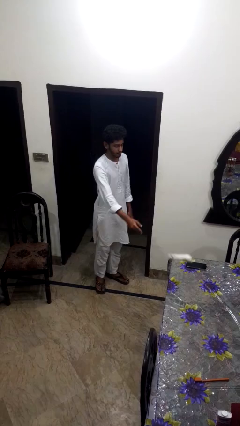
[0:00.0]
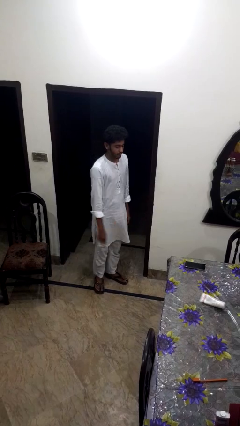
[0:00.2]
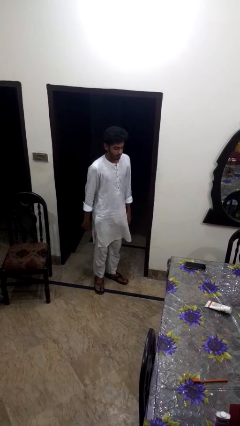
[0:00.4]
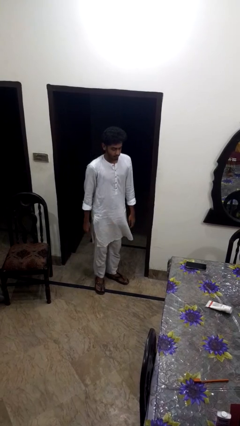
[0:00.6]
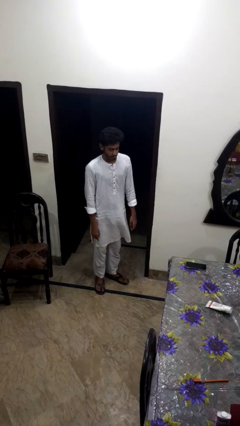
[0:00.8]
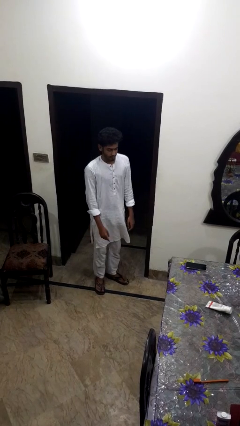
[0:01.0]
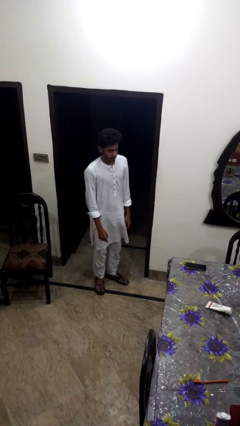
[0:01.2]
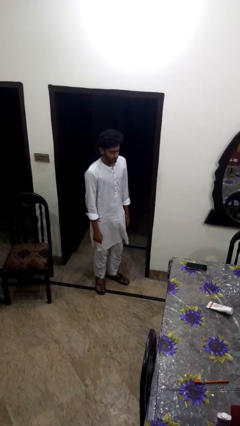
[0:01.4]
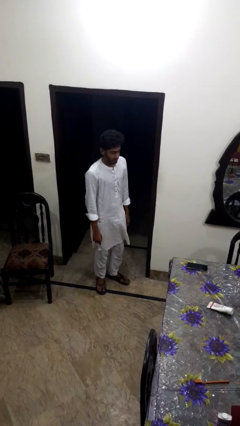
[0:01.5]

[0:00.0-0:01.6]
person throws object on table

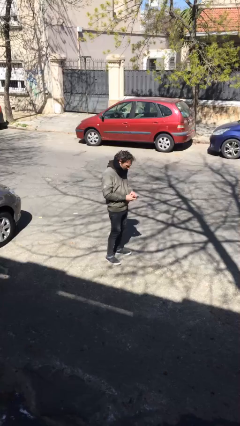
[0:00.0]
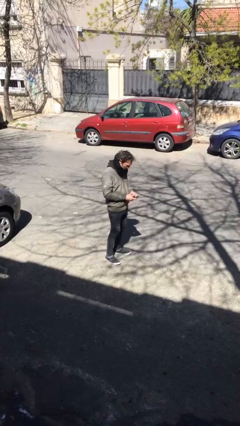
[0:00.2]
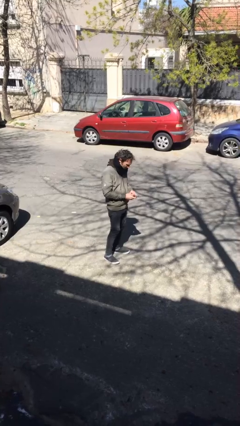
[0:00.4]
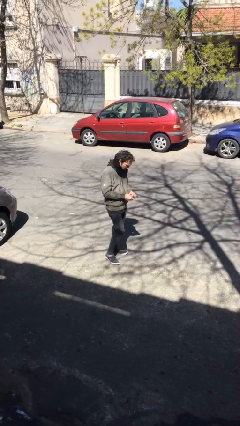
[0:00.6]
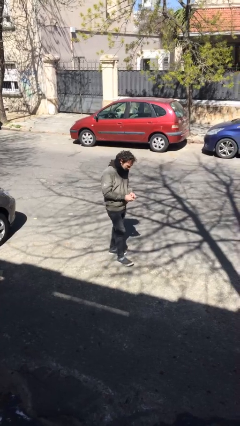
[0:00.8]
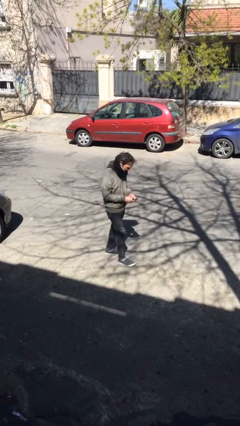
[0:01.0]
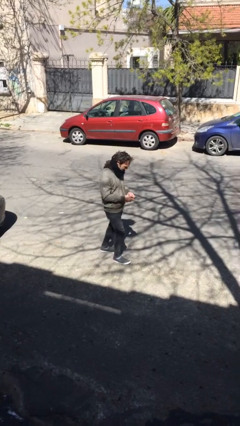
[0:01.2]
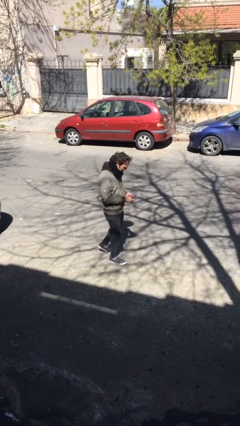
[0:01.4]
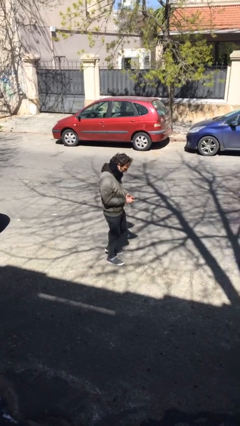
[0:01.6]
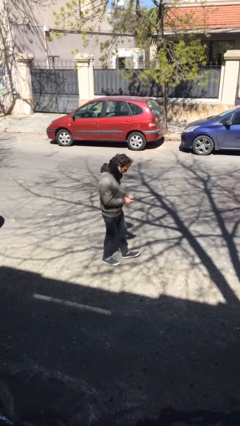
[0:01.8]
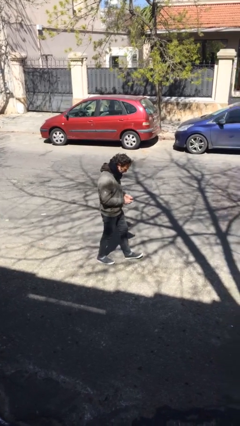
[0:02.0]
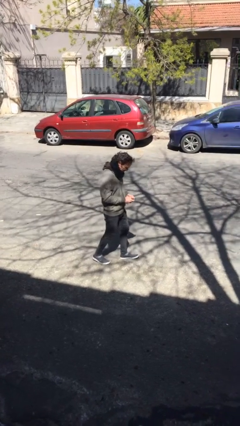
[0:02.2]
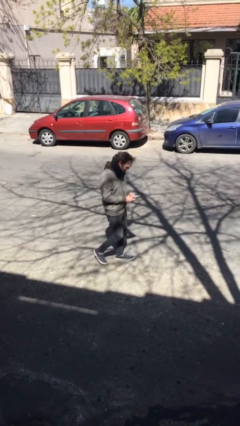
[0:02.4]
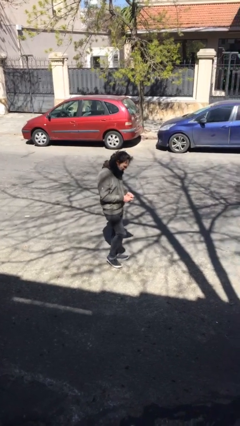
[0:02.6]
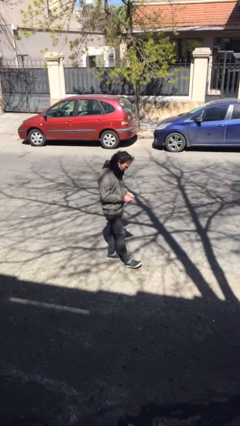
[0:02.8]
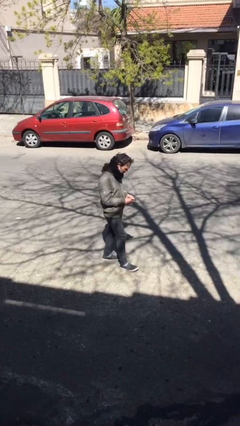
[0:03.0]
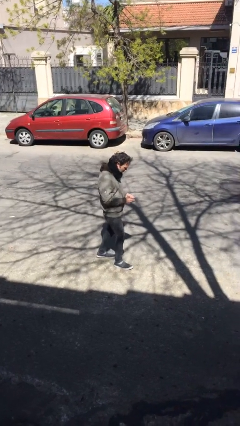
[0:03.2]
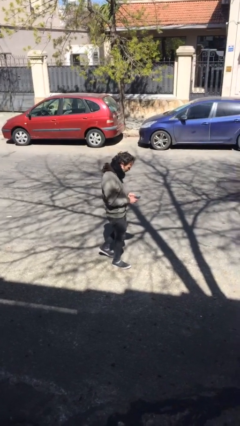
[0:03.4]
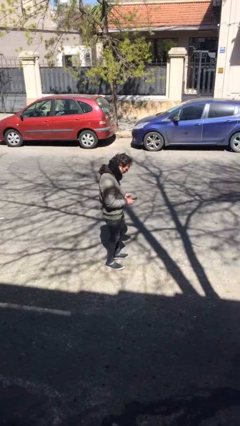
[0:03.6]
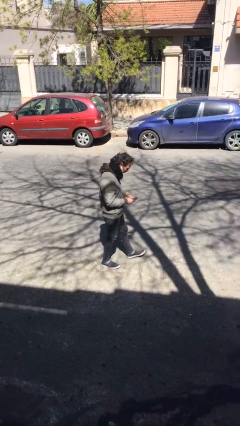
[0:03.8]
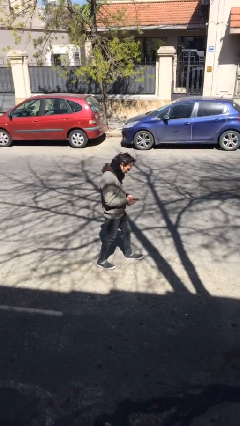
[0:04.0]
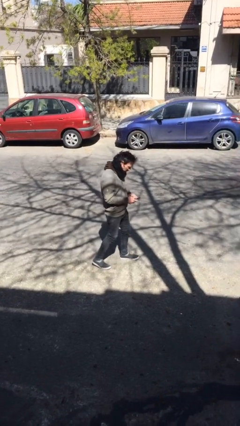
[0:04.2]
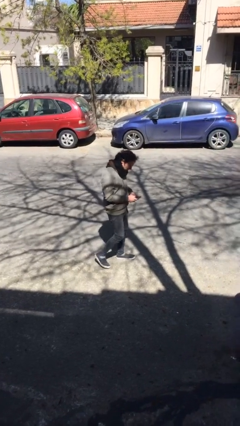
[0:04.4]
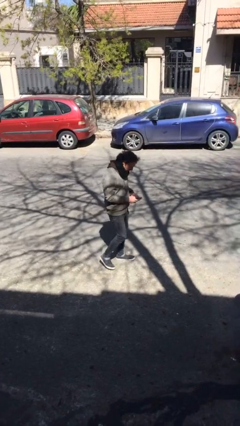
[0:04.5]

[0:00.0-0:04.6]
person texts on phone

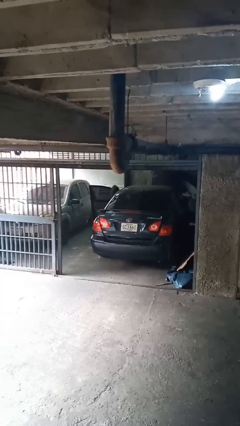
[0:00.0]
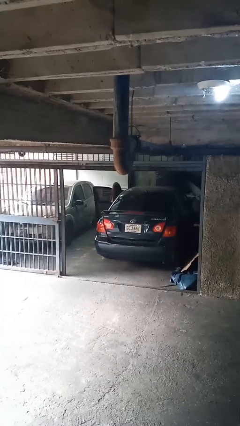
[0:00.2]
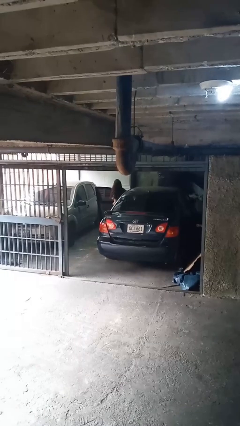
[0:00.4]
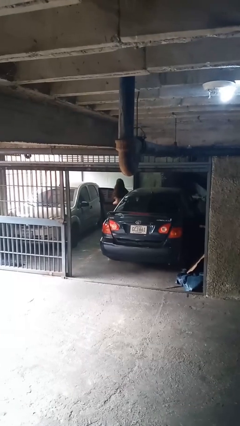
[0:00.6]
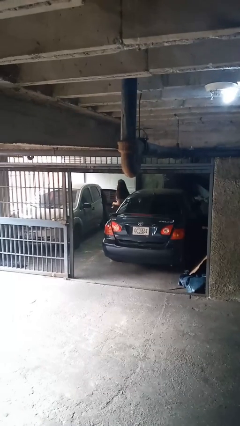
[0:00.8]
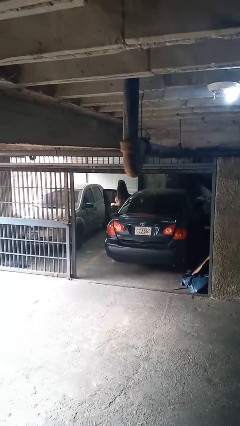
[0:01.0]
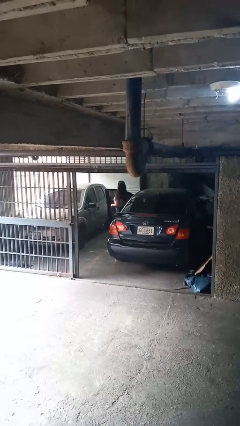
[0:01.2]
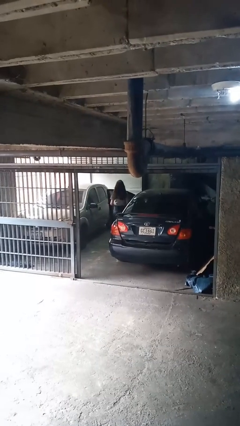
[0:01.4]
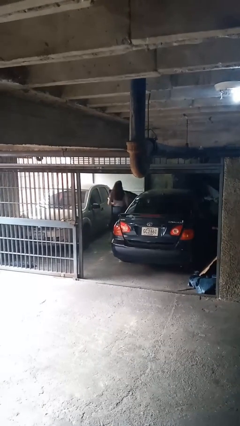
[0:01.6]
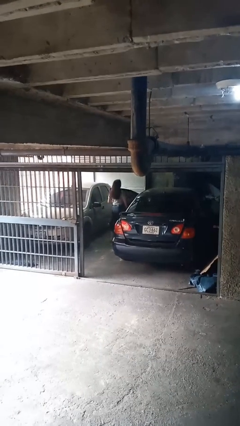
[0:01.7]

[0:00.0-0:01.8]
person exits car

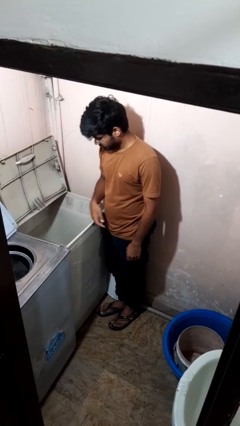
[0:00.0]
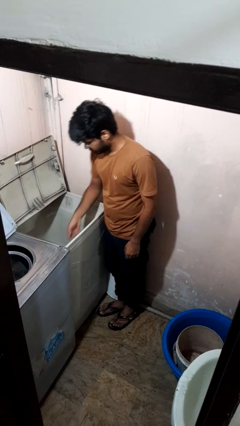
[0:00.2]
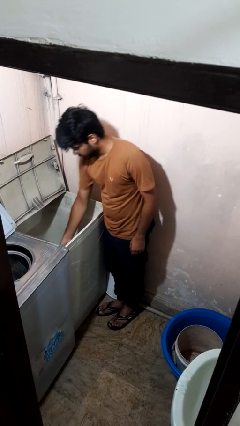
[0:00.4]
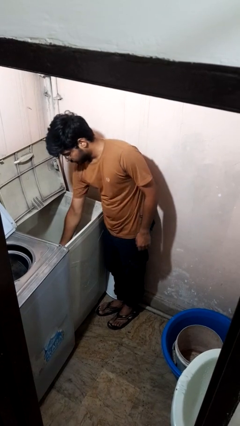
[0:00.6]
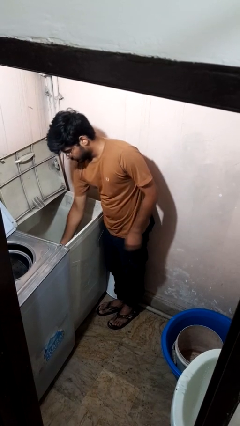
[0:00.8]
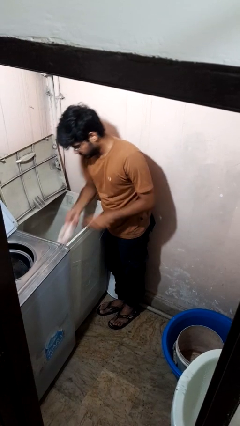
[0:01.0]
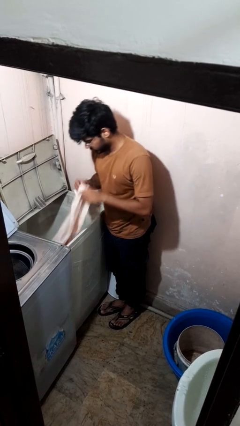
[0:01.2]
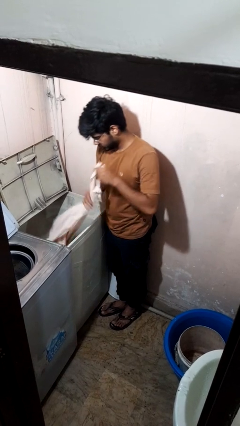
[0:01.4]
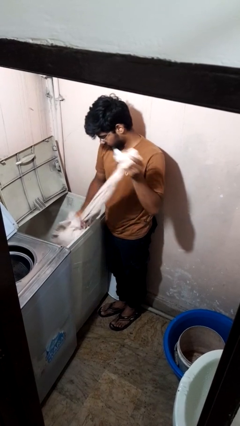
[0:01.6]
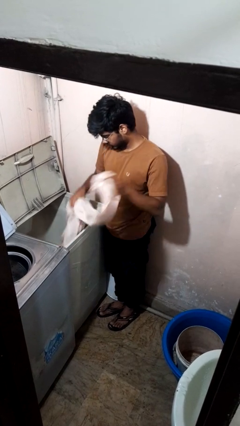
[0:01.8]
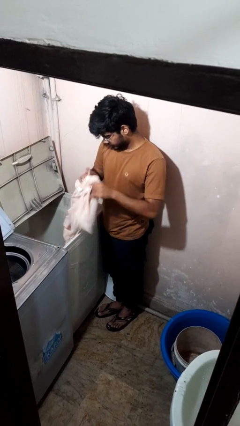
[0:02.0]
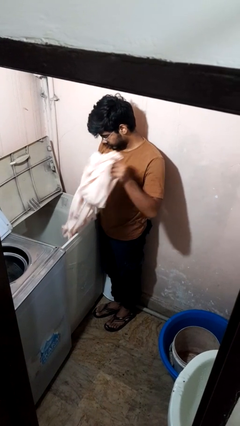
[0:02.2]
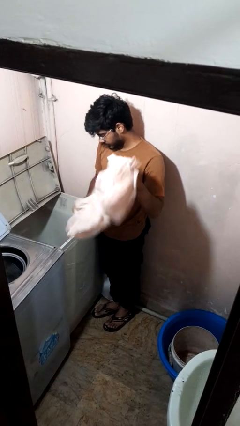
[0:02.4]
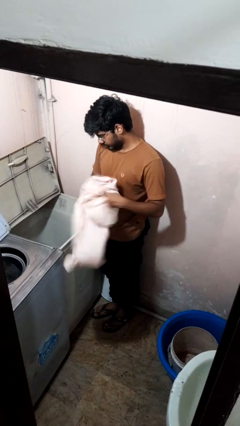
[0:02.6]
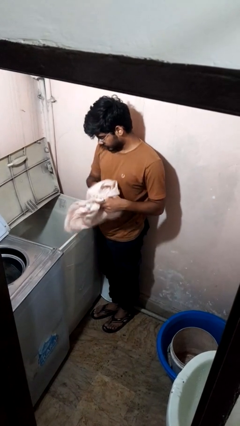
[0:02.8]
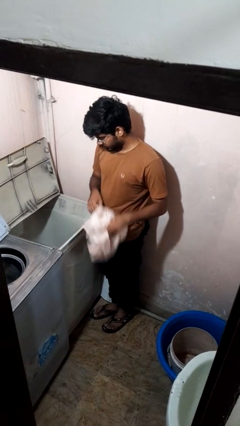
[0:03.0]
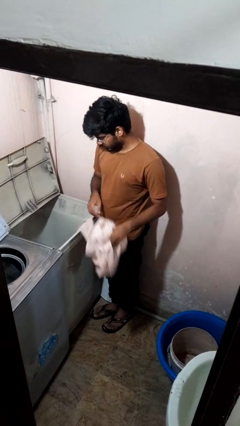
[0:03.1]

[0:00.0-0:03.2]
person unloads clotheswasher

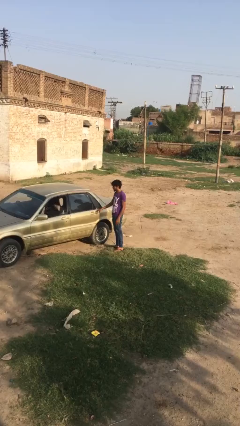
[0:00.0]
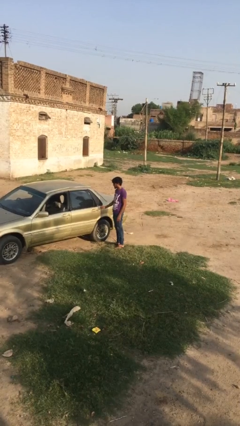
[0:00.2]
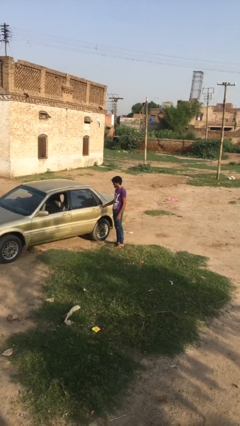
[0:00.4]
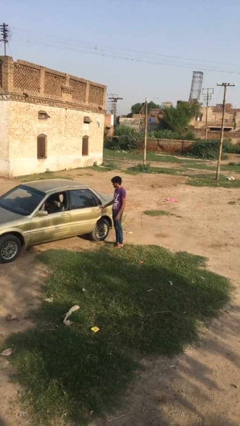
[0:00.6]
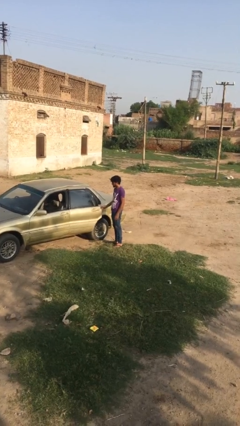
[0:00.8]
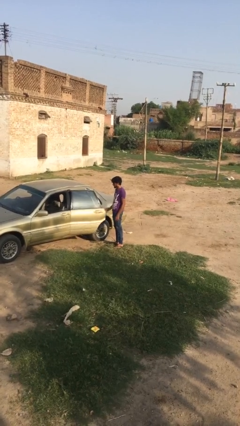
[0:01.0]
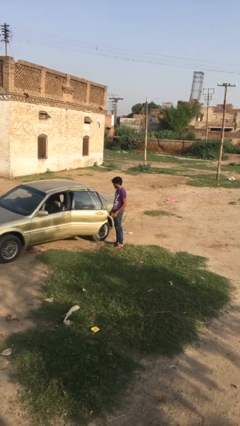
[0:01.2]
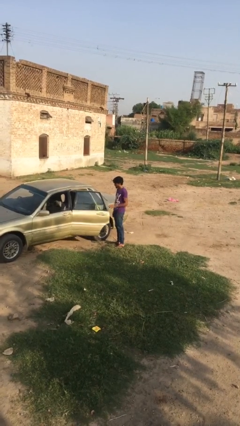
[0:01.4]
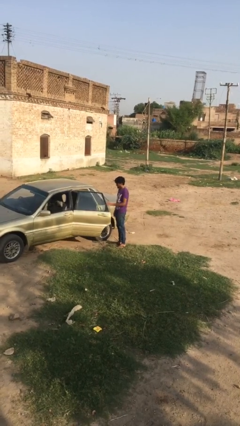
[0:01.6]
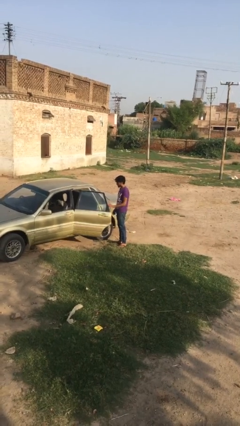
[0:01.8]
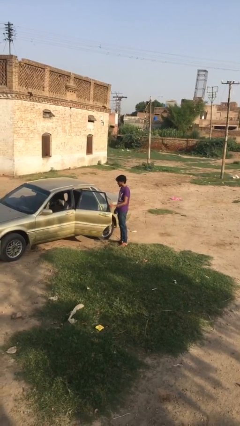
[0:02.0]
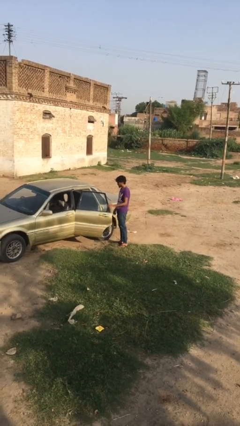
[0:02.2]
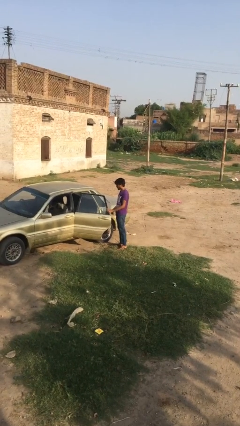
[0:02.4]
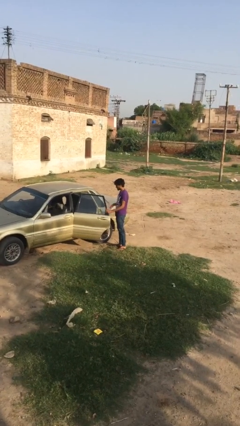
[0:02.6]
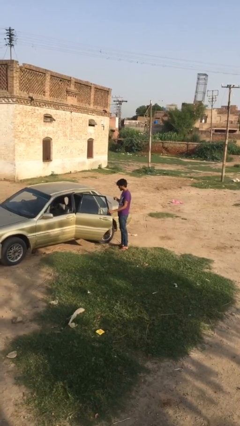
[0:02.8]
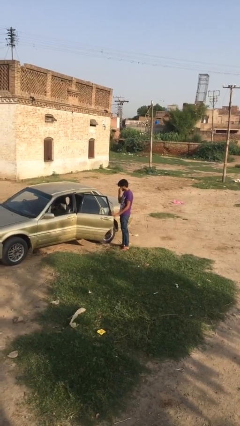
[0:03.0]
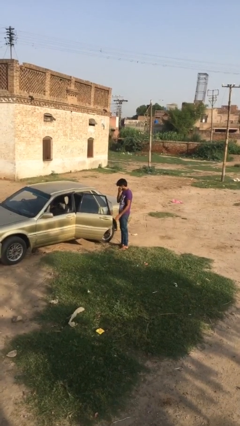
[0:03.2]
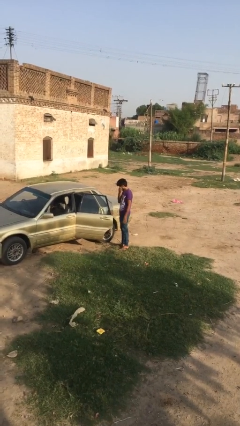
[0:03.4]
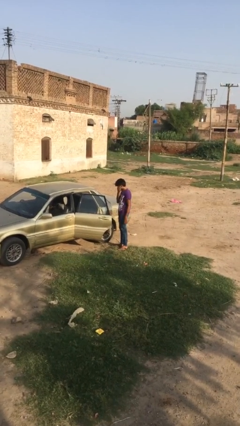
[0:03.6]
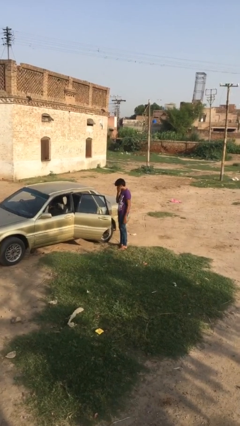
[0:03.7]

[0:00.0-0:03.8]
person opens car door

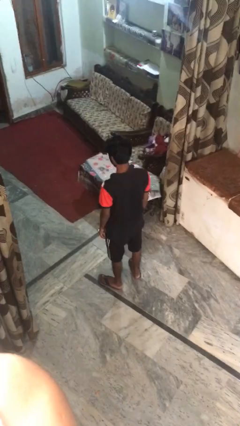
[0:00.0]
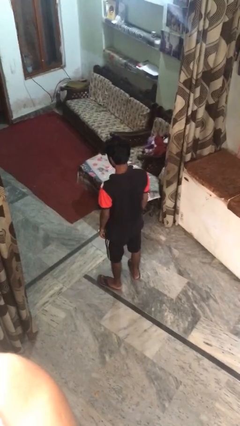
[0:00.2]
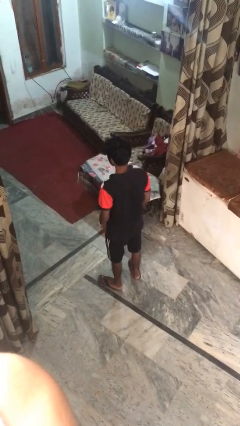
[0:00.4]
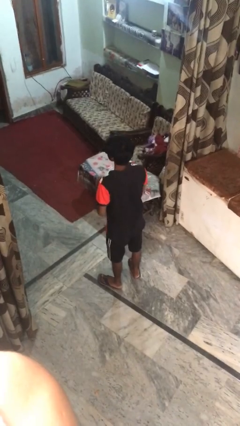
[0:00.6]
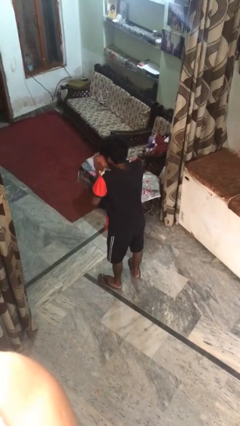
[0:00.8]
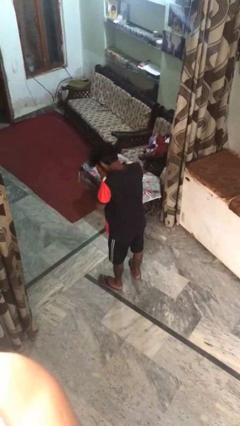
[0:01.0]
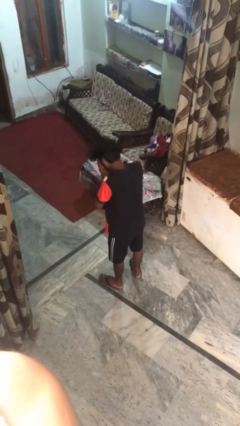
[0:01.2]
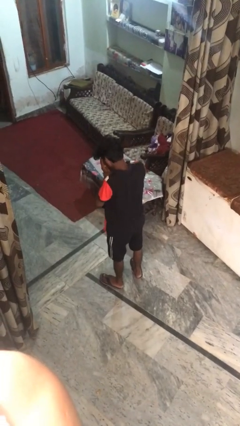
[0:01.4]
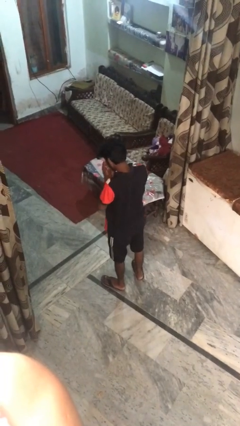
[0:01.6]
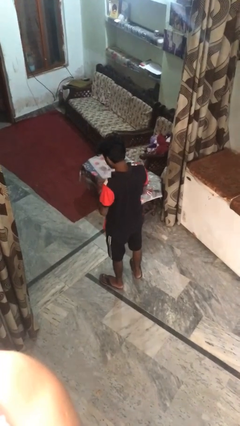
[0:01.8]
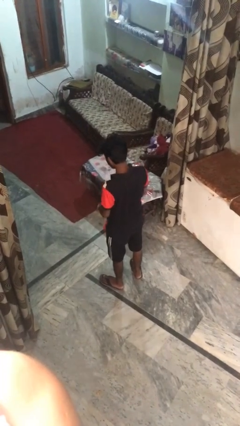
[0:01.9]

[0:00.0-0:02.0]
person sneezes into hand

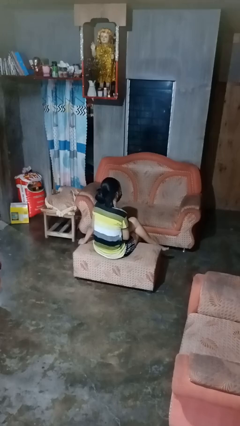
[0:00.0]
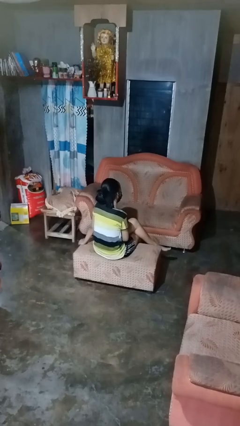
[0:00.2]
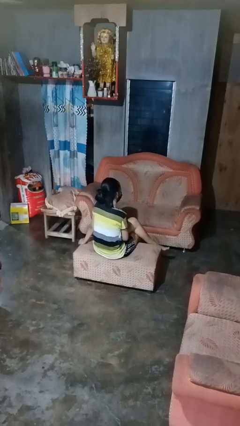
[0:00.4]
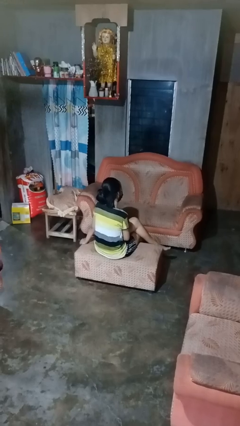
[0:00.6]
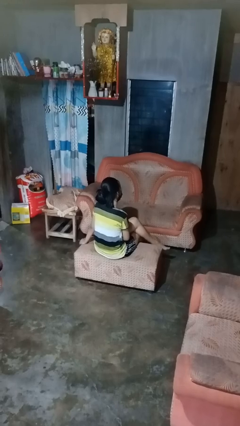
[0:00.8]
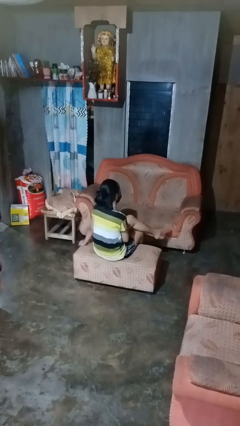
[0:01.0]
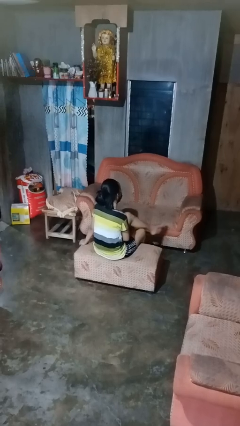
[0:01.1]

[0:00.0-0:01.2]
person crosses legs
